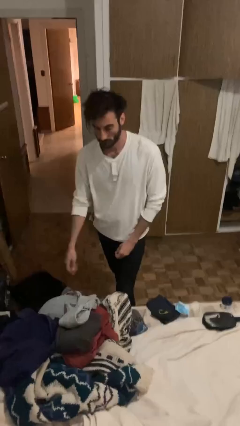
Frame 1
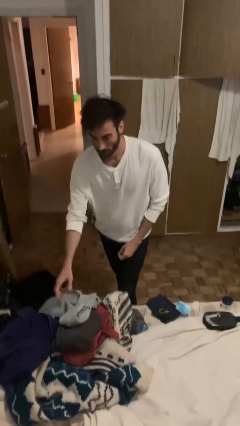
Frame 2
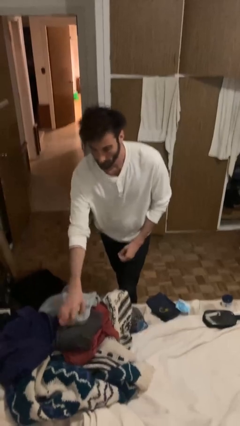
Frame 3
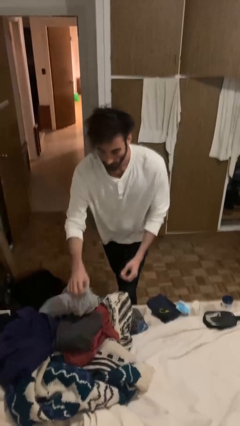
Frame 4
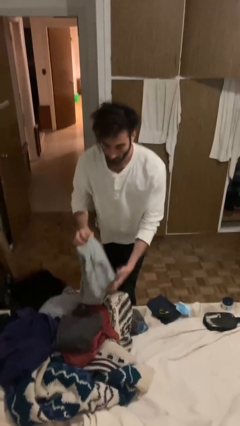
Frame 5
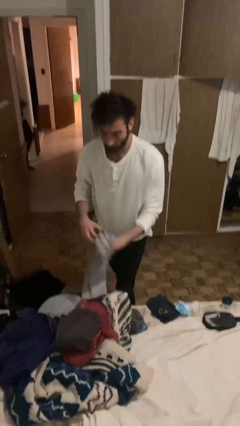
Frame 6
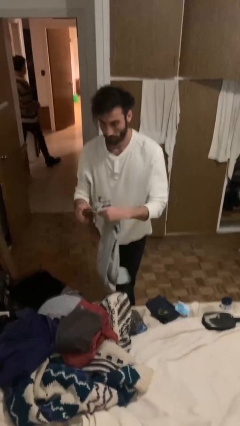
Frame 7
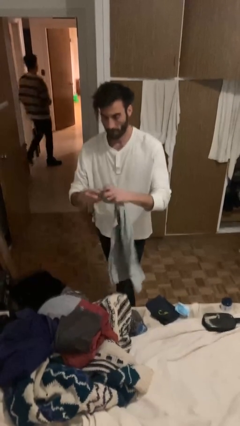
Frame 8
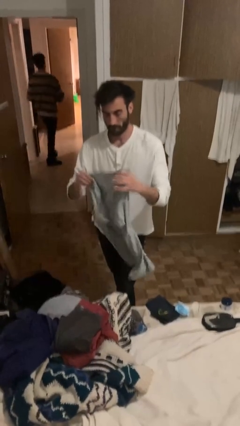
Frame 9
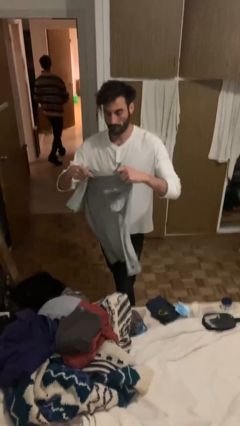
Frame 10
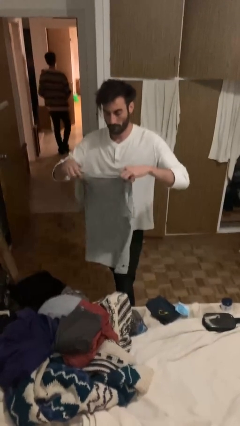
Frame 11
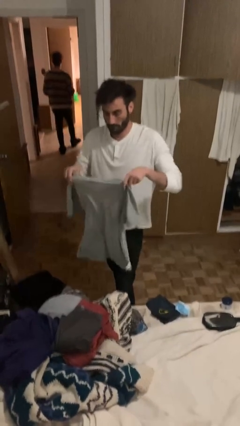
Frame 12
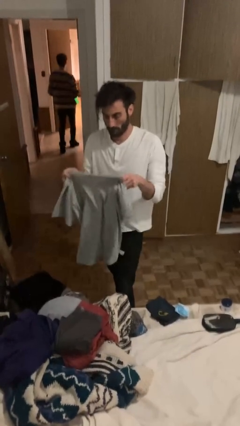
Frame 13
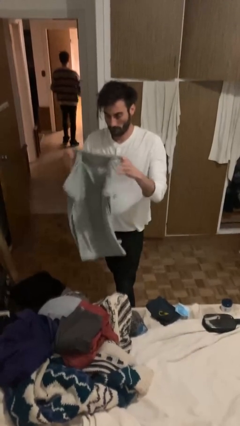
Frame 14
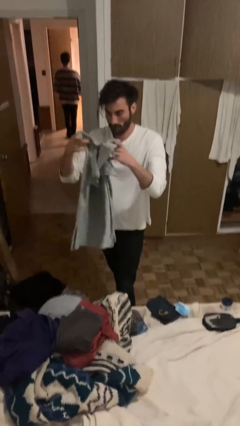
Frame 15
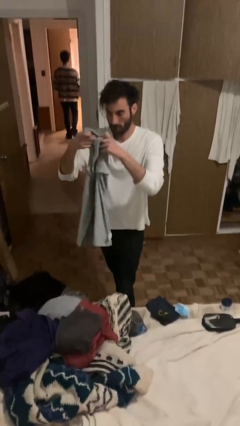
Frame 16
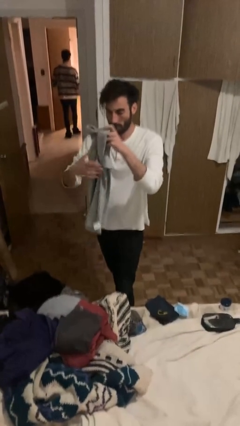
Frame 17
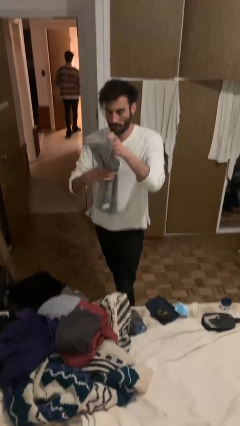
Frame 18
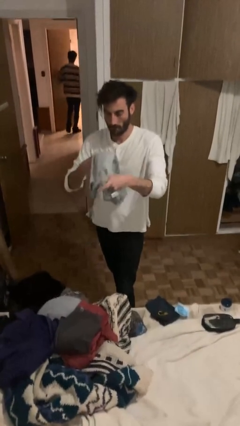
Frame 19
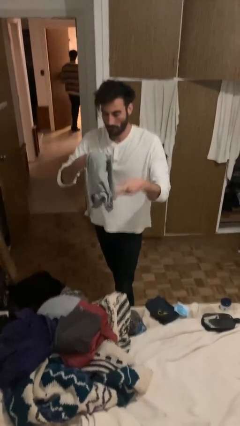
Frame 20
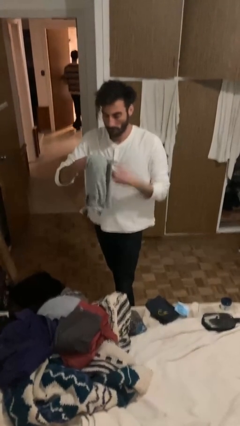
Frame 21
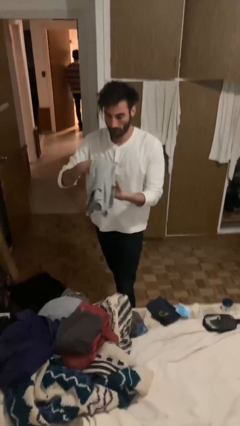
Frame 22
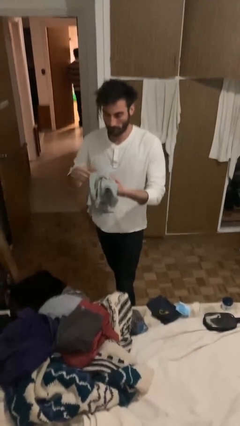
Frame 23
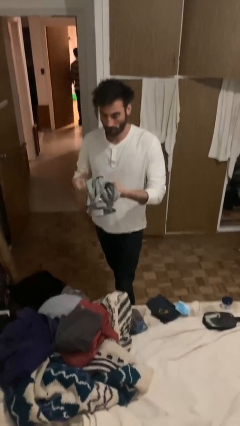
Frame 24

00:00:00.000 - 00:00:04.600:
person folds shirt

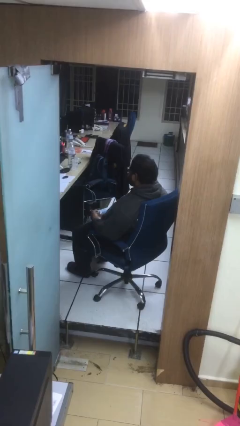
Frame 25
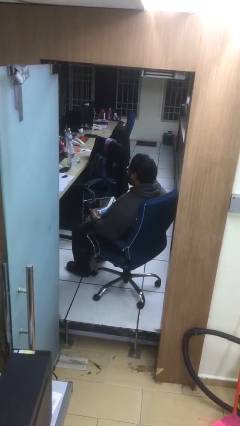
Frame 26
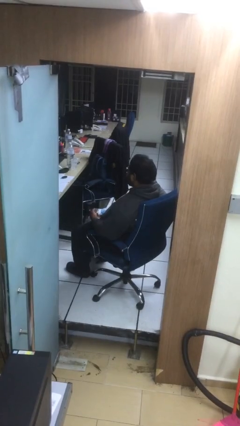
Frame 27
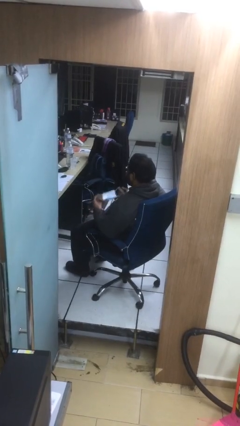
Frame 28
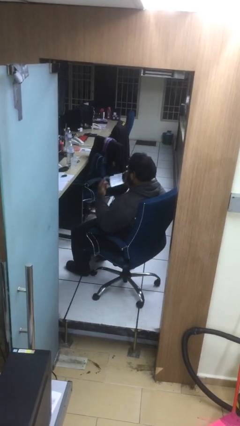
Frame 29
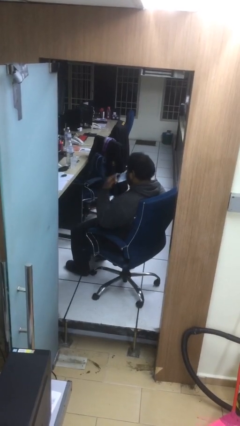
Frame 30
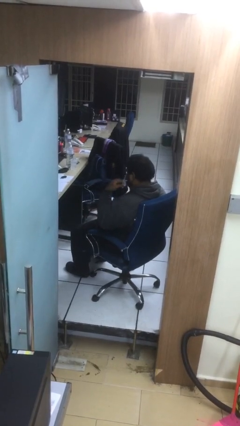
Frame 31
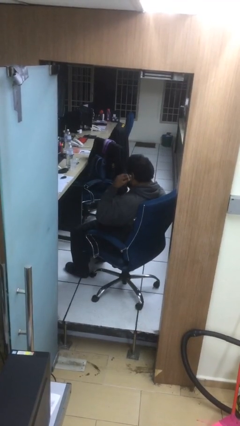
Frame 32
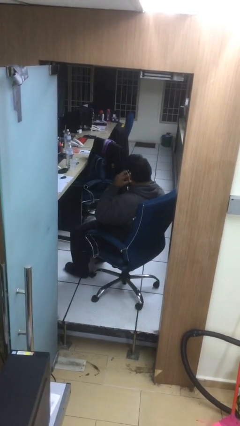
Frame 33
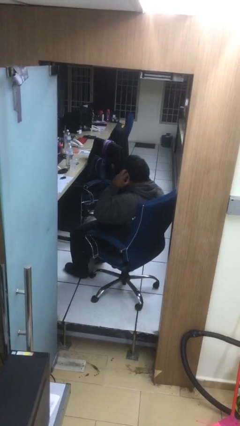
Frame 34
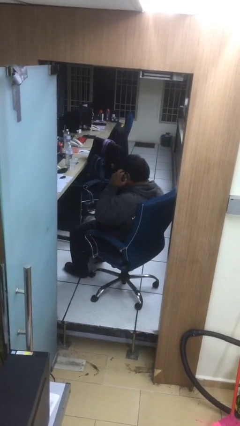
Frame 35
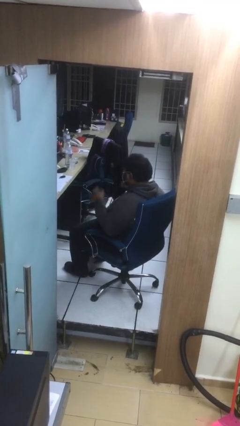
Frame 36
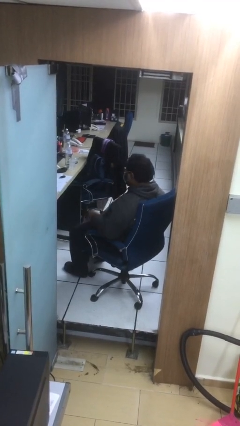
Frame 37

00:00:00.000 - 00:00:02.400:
person puts on facemask

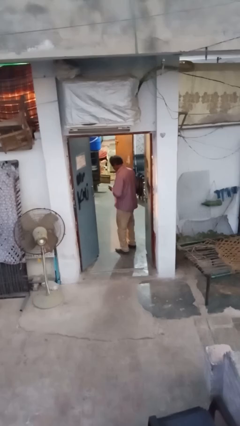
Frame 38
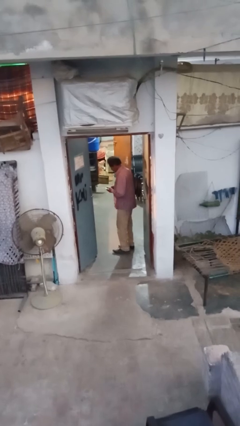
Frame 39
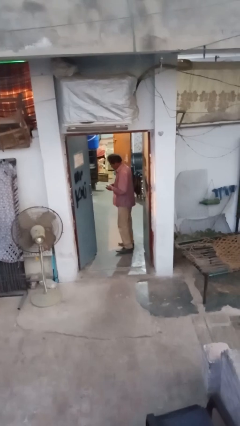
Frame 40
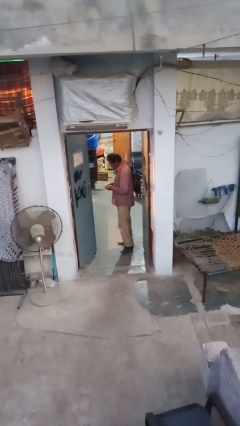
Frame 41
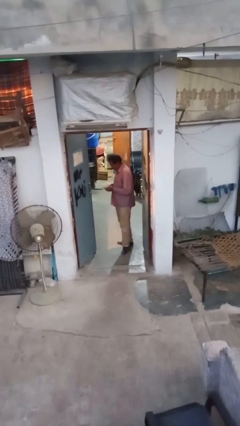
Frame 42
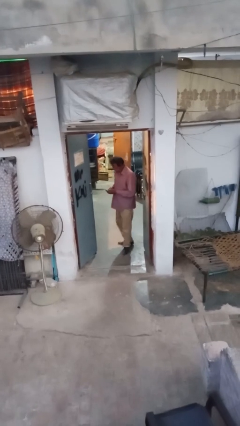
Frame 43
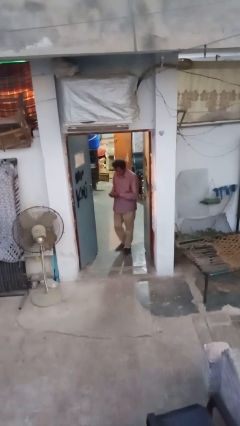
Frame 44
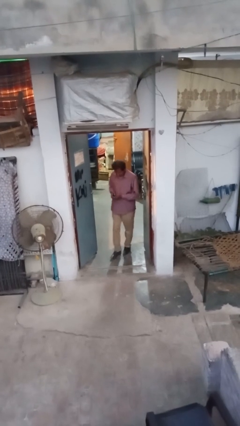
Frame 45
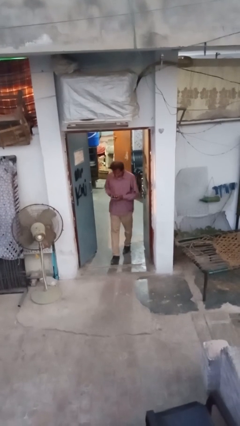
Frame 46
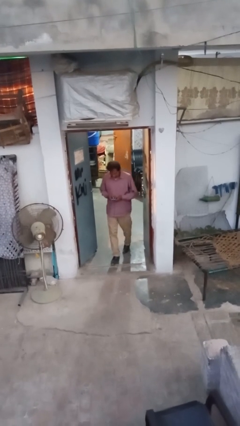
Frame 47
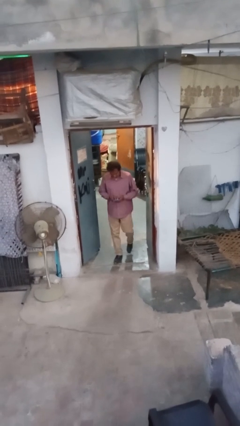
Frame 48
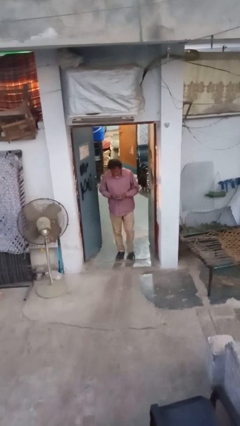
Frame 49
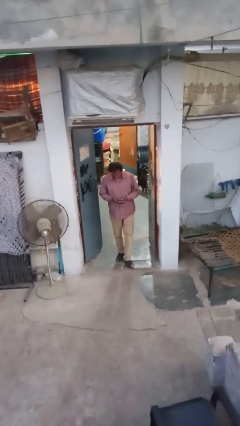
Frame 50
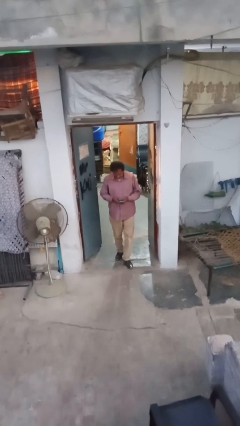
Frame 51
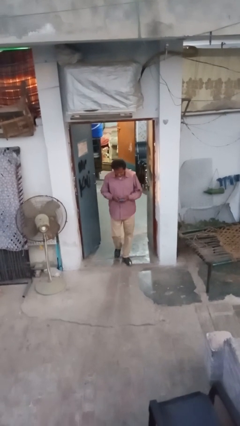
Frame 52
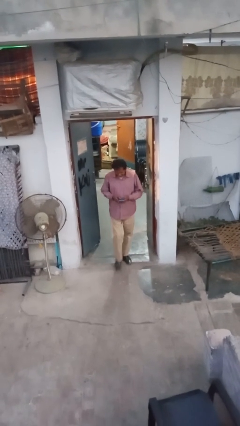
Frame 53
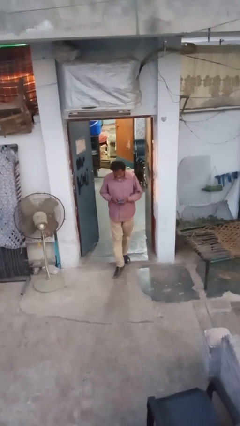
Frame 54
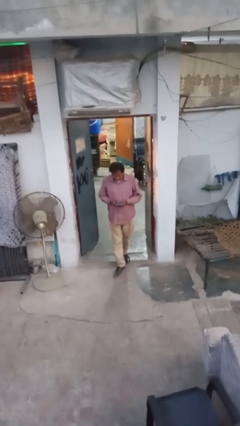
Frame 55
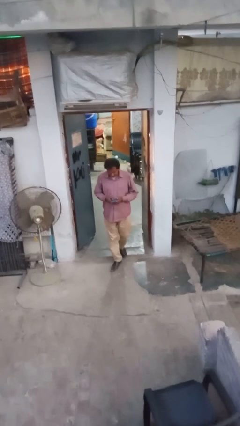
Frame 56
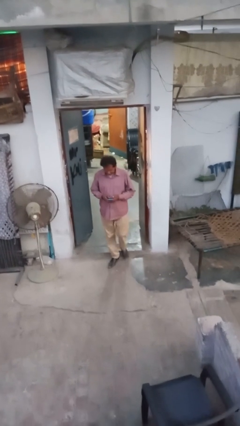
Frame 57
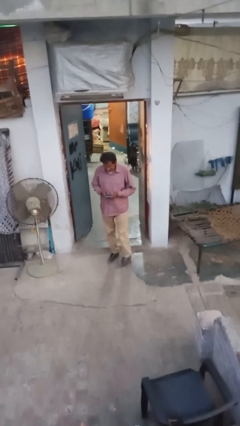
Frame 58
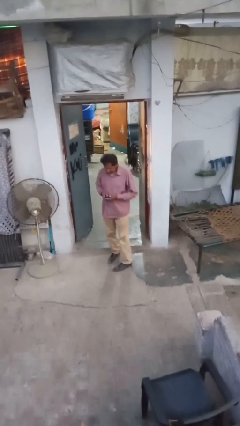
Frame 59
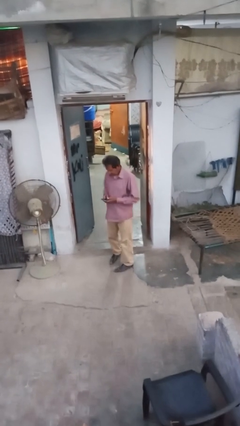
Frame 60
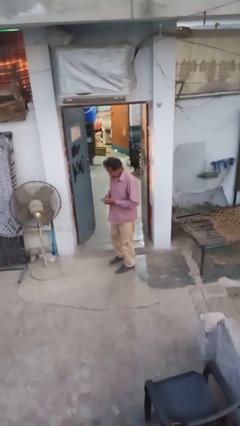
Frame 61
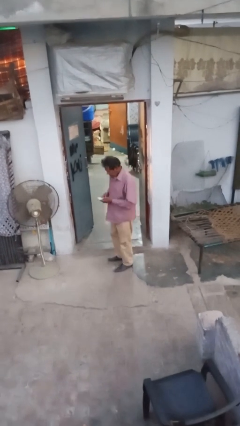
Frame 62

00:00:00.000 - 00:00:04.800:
person enters scene through structure

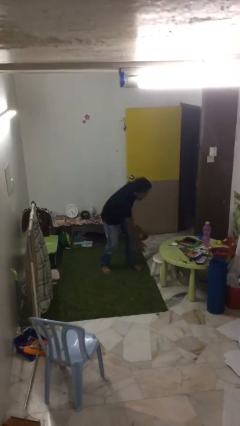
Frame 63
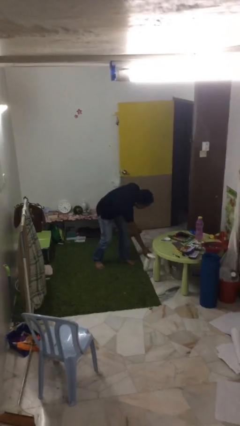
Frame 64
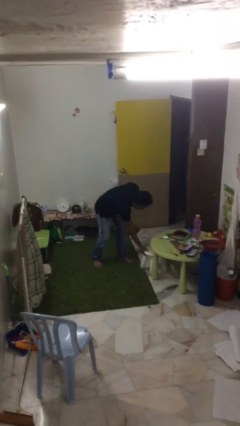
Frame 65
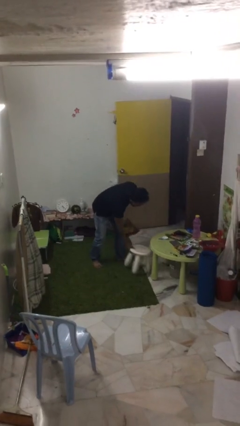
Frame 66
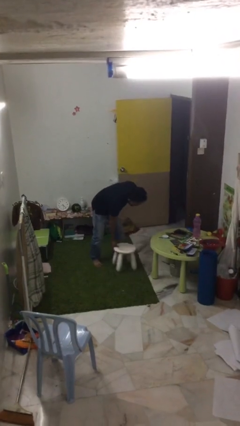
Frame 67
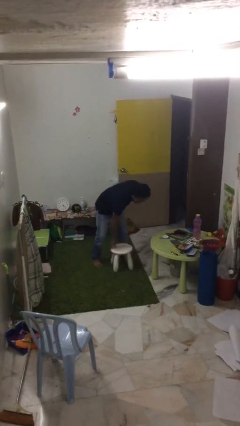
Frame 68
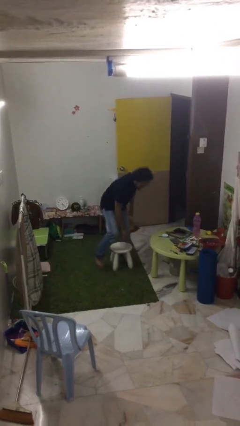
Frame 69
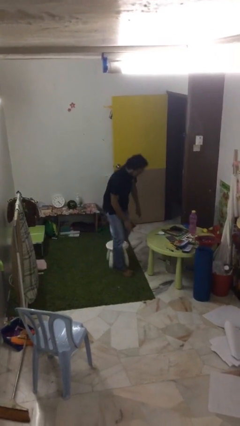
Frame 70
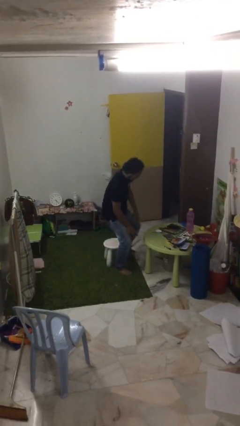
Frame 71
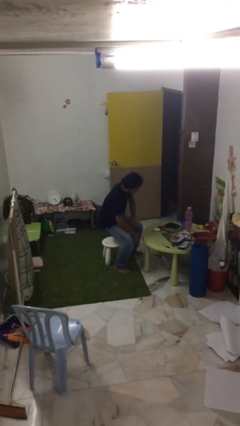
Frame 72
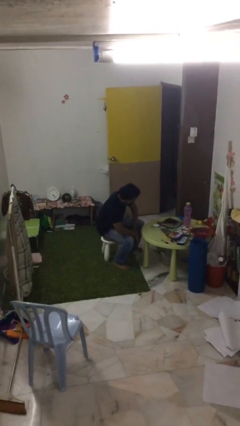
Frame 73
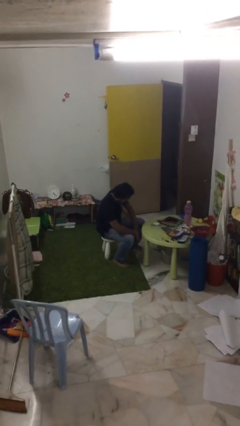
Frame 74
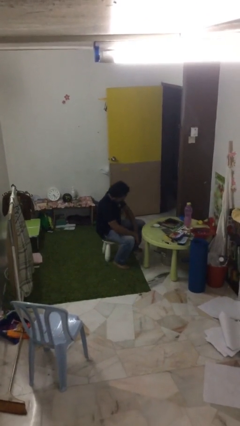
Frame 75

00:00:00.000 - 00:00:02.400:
person sits down

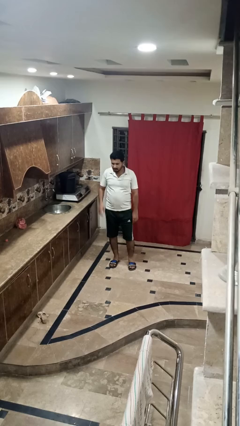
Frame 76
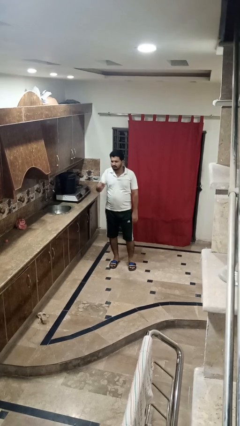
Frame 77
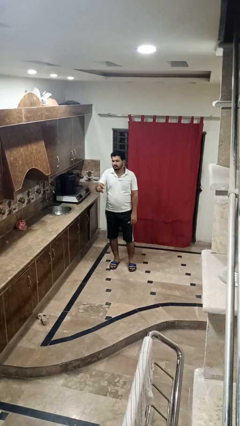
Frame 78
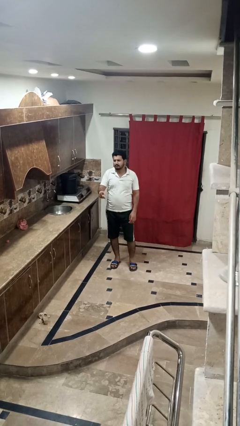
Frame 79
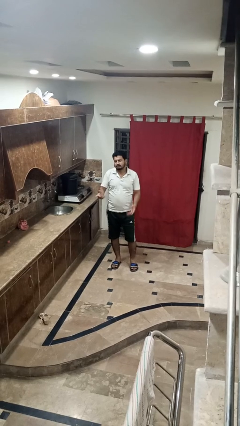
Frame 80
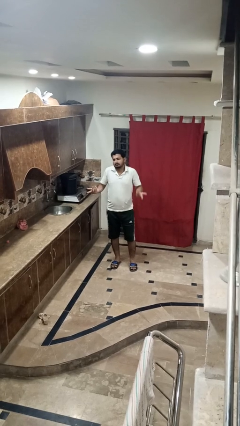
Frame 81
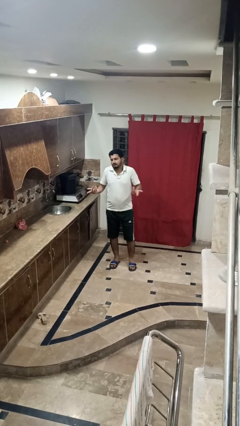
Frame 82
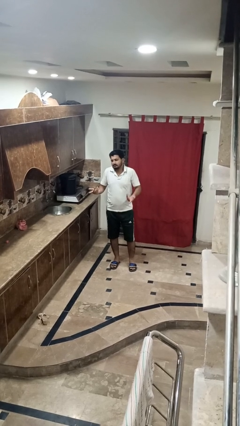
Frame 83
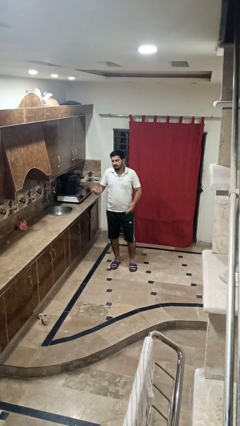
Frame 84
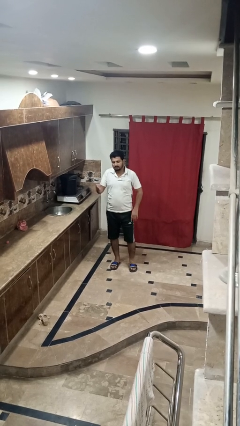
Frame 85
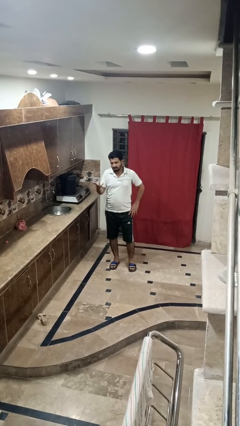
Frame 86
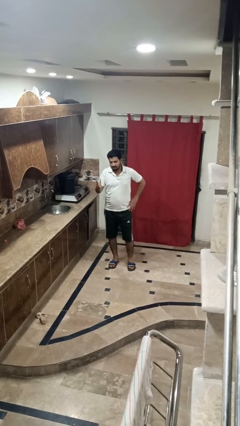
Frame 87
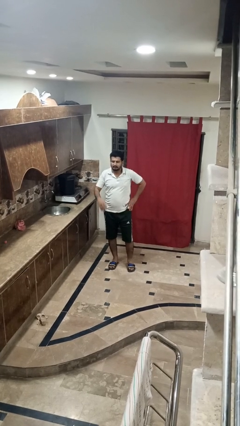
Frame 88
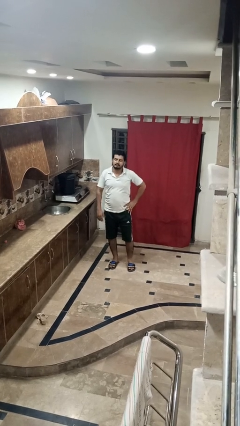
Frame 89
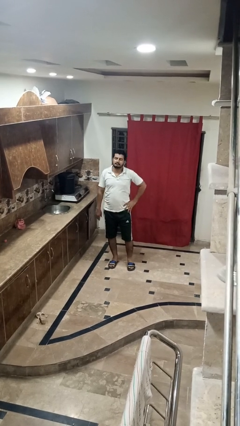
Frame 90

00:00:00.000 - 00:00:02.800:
person shrugs

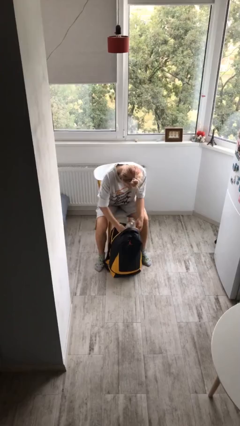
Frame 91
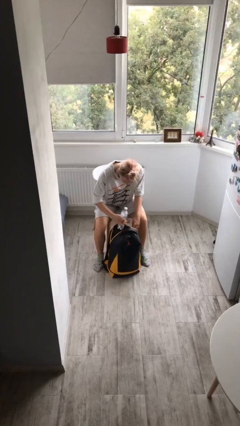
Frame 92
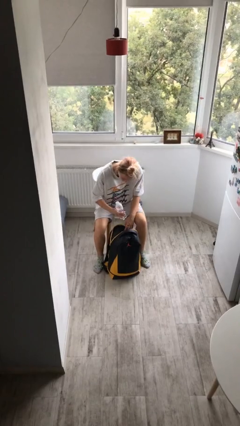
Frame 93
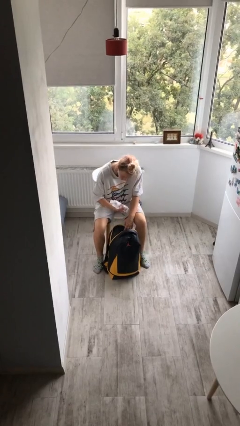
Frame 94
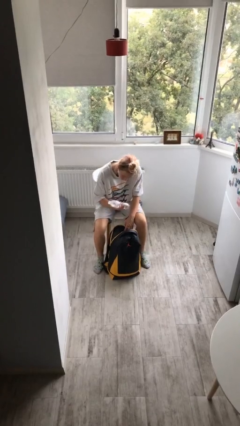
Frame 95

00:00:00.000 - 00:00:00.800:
person takes object from backpack
